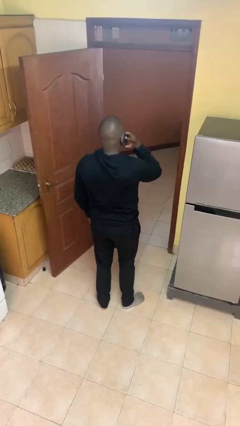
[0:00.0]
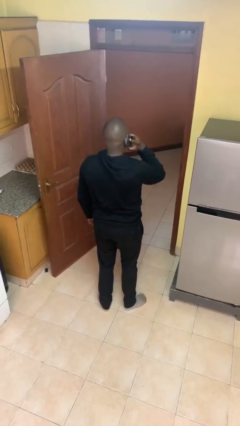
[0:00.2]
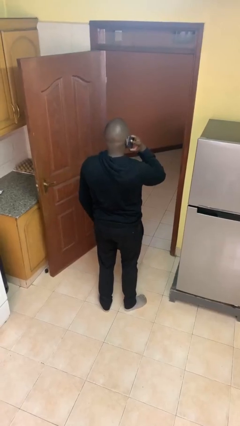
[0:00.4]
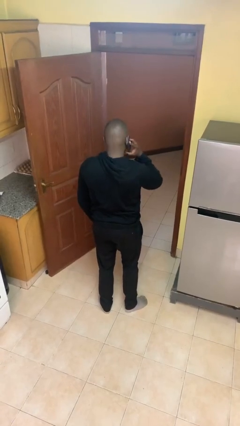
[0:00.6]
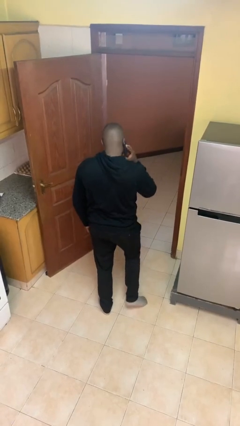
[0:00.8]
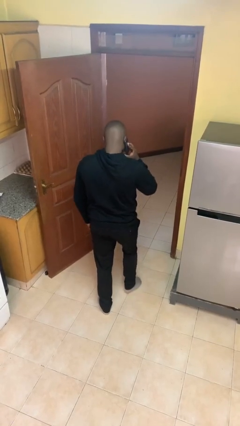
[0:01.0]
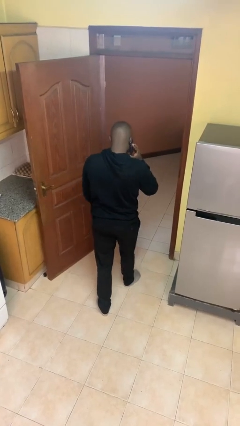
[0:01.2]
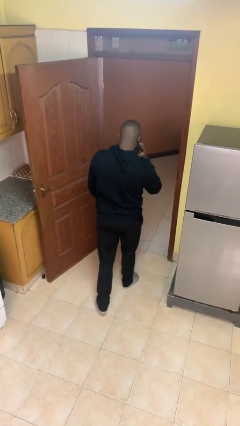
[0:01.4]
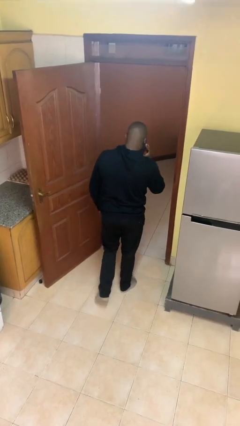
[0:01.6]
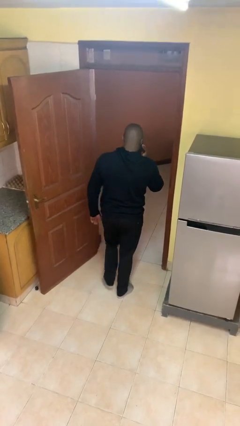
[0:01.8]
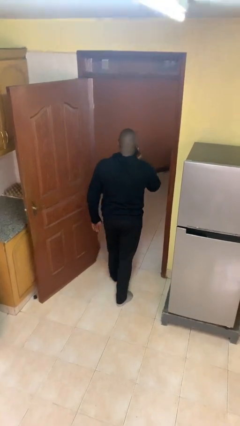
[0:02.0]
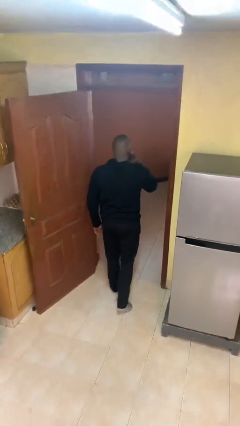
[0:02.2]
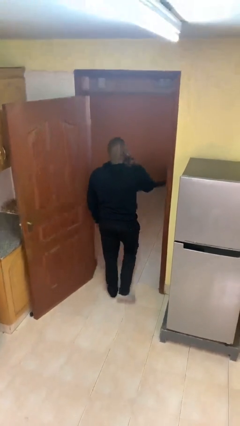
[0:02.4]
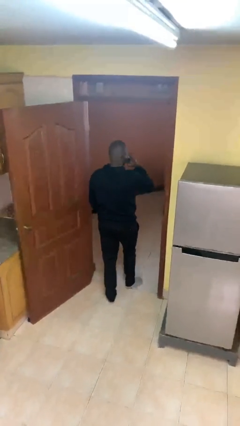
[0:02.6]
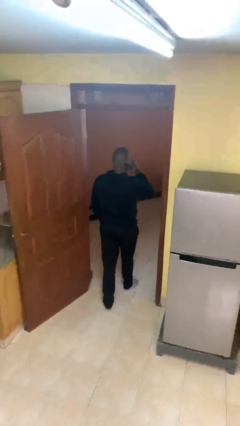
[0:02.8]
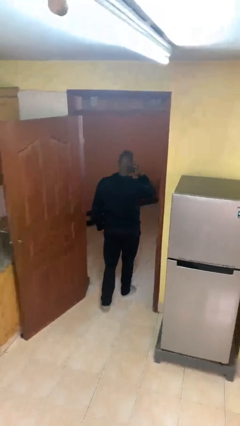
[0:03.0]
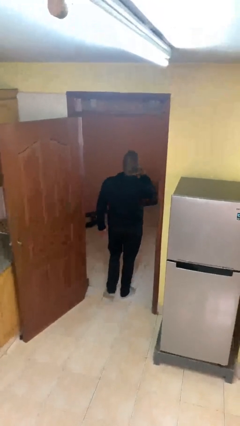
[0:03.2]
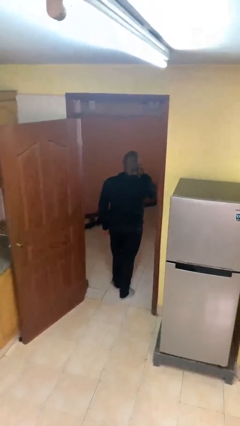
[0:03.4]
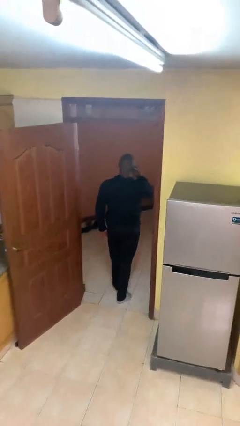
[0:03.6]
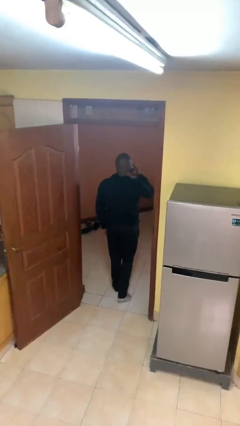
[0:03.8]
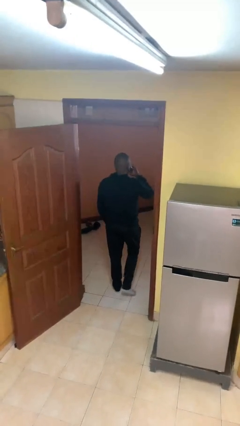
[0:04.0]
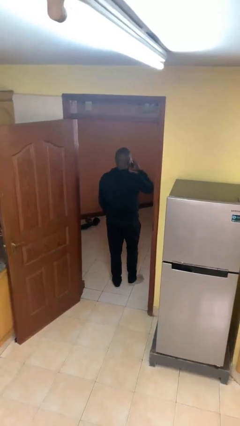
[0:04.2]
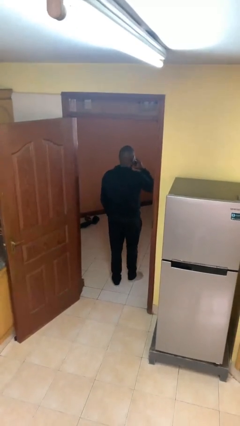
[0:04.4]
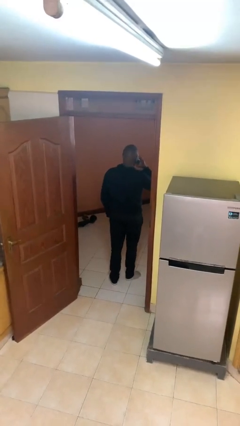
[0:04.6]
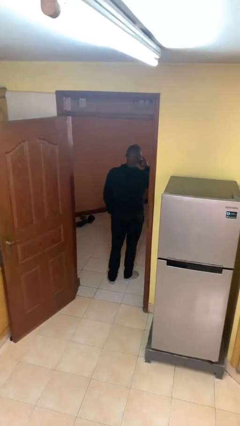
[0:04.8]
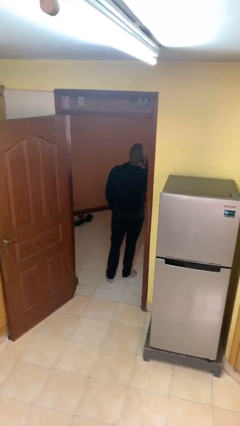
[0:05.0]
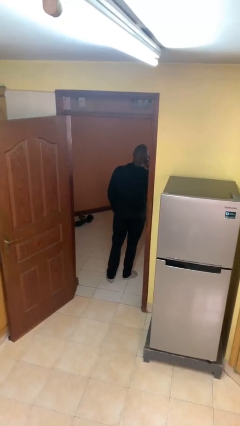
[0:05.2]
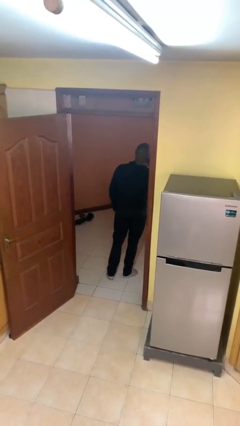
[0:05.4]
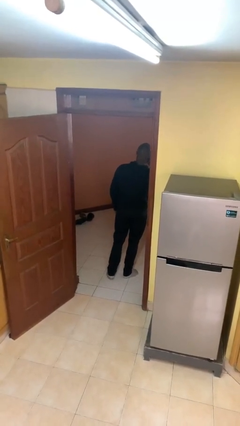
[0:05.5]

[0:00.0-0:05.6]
person exits scene through structure

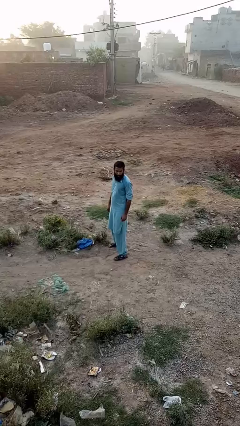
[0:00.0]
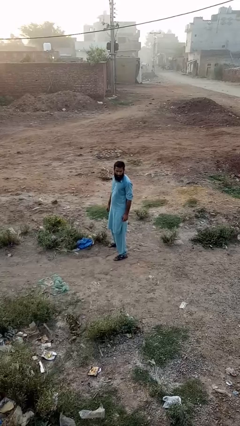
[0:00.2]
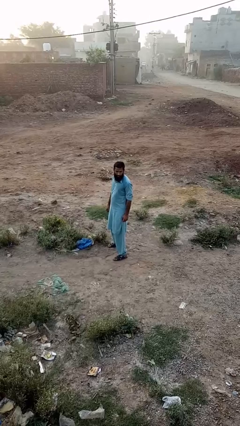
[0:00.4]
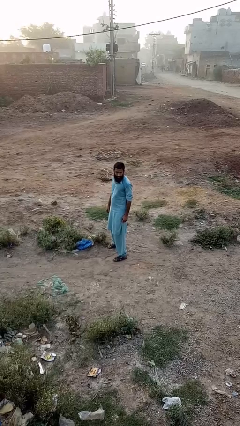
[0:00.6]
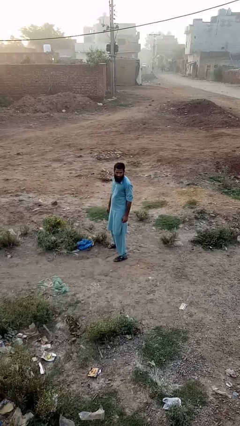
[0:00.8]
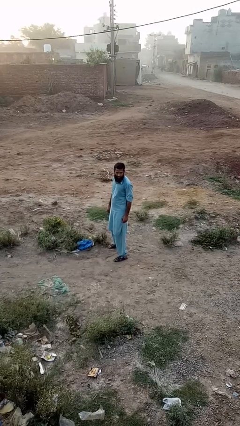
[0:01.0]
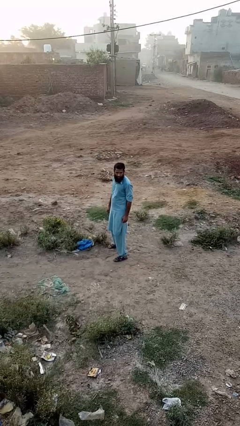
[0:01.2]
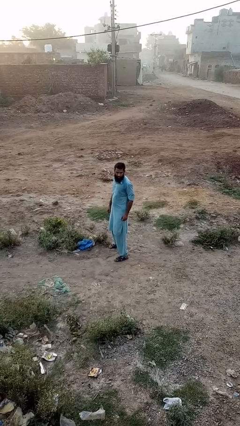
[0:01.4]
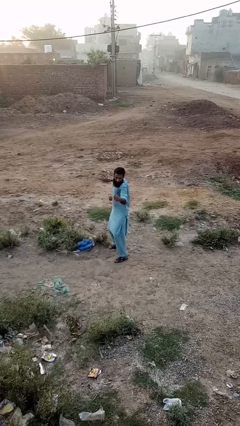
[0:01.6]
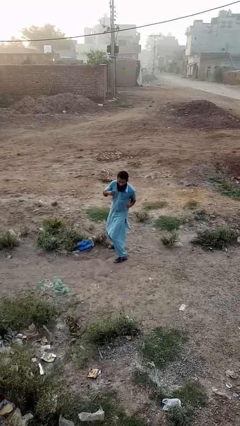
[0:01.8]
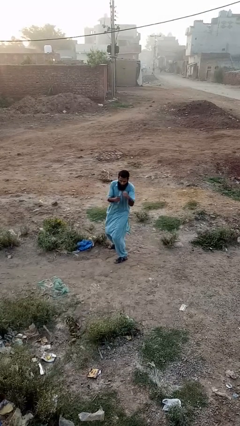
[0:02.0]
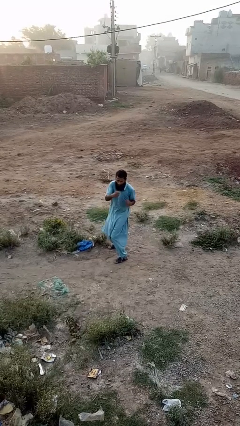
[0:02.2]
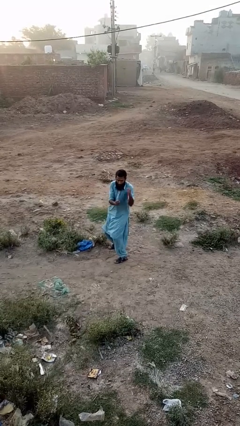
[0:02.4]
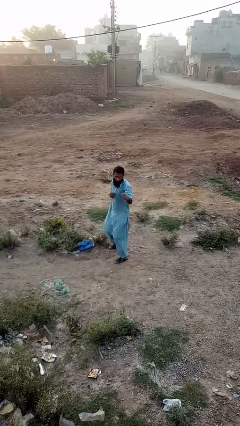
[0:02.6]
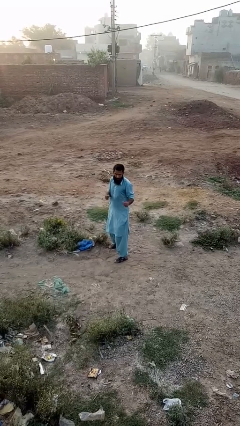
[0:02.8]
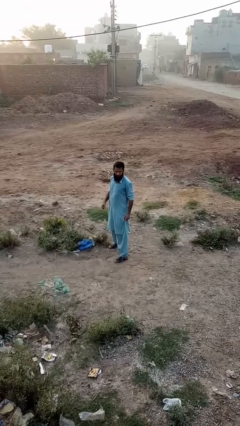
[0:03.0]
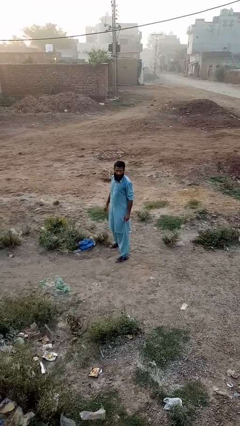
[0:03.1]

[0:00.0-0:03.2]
person punches

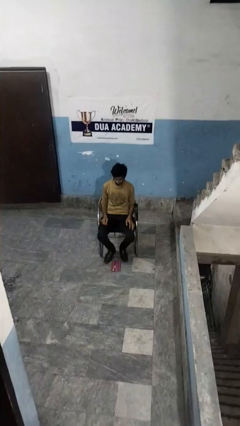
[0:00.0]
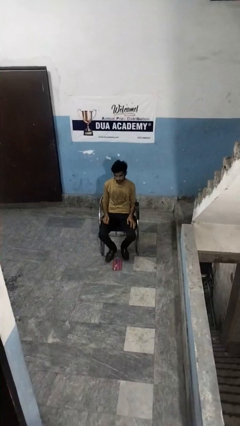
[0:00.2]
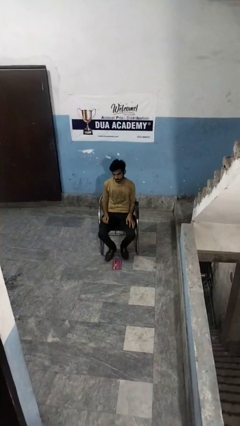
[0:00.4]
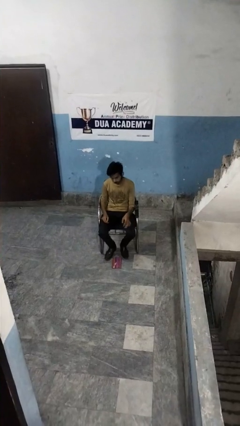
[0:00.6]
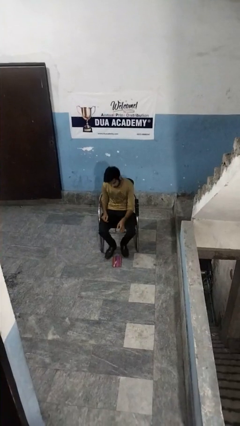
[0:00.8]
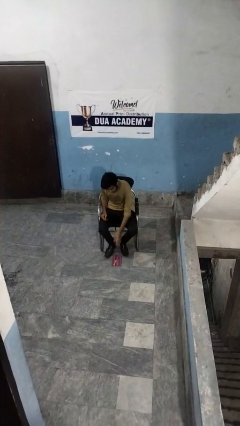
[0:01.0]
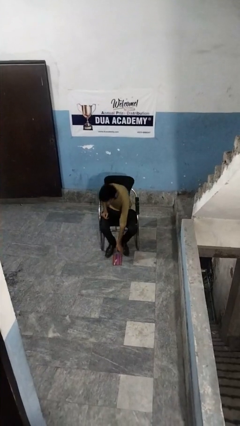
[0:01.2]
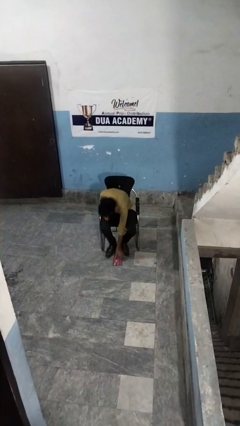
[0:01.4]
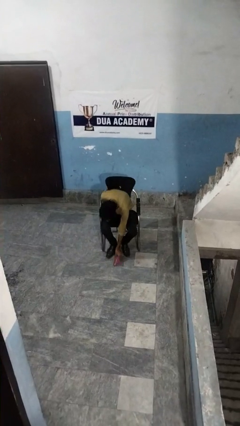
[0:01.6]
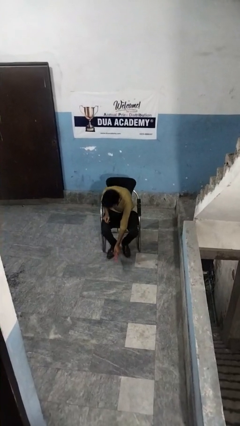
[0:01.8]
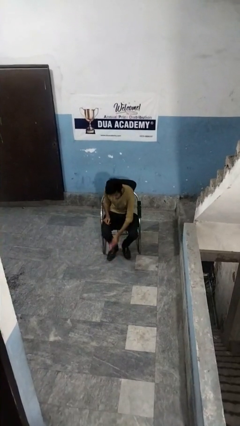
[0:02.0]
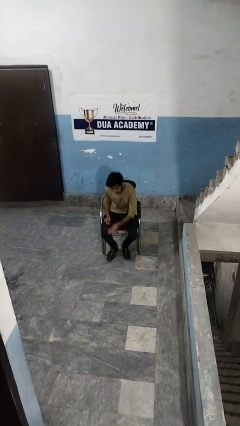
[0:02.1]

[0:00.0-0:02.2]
person picks up object from floor

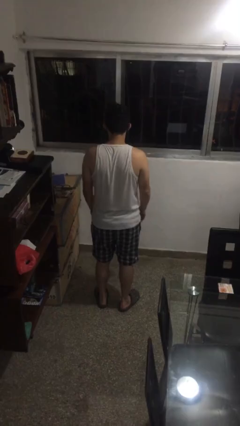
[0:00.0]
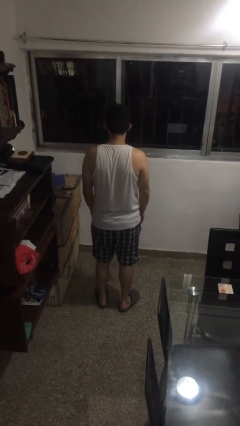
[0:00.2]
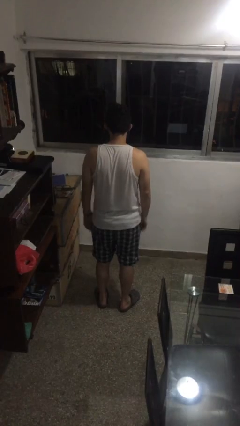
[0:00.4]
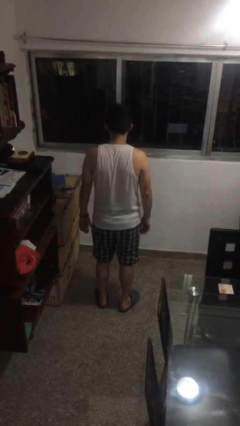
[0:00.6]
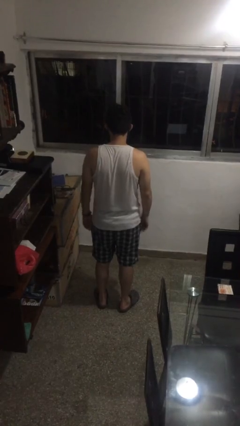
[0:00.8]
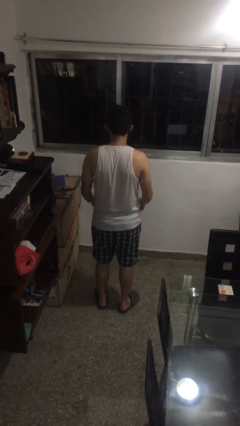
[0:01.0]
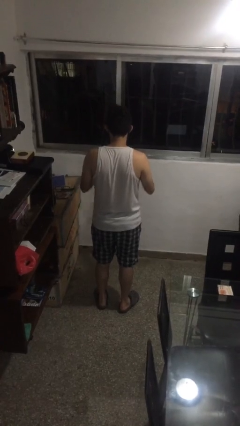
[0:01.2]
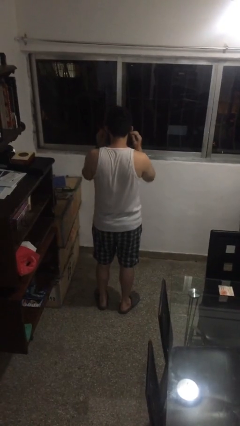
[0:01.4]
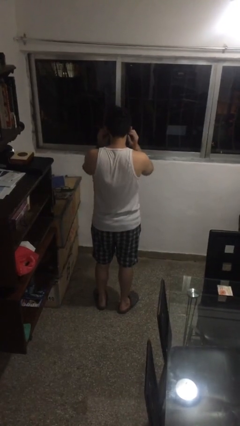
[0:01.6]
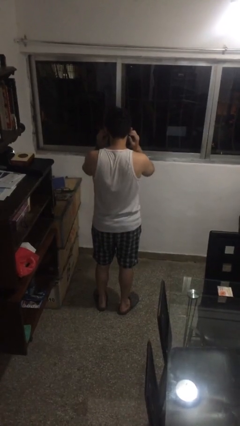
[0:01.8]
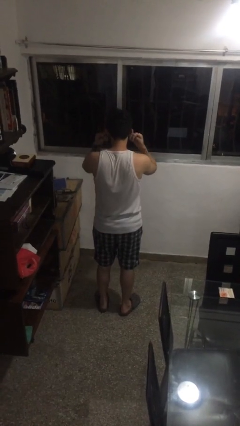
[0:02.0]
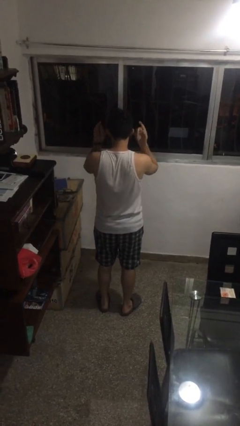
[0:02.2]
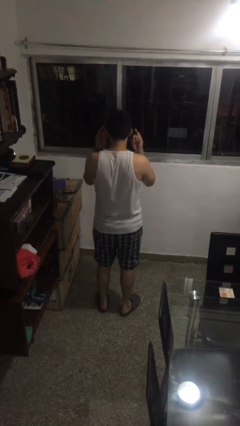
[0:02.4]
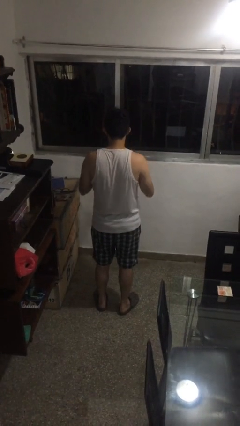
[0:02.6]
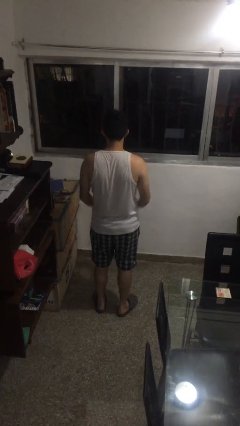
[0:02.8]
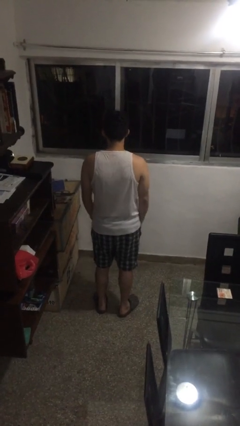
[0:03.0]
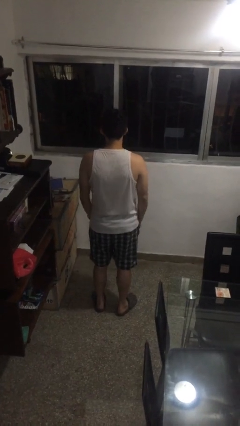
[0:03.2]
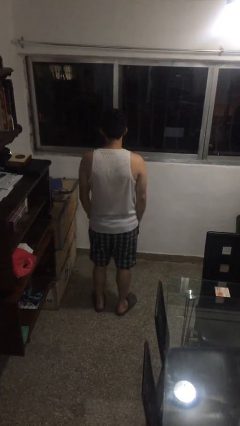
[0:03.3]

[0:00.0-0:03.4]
person takes off facemask

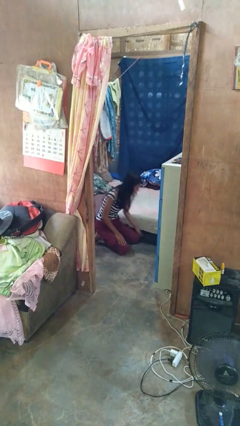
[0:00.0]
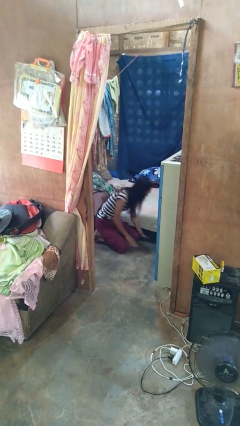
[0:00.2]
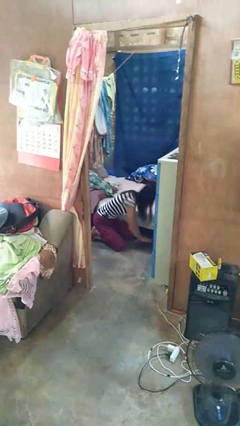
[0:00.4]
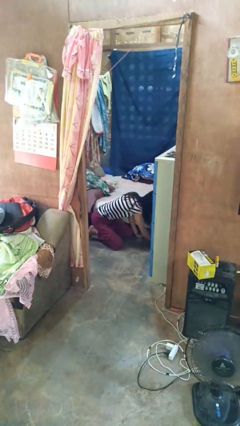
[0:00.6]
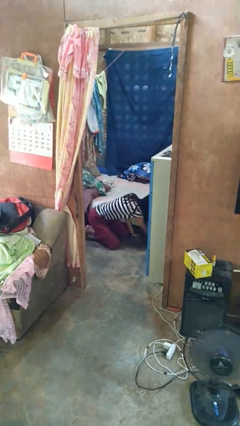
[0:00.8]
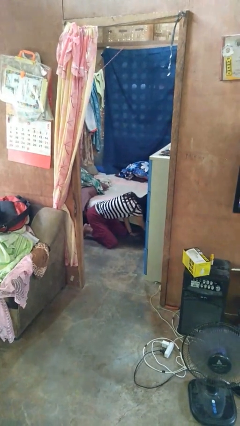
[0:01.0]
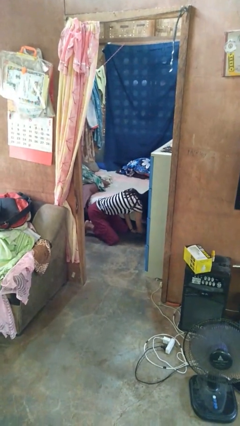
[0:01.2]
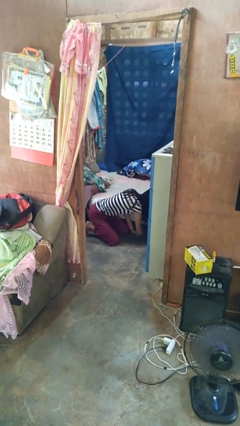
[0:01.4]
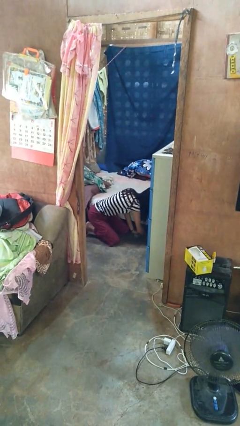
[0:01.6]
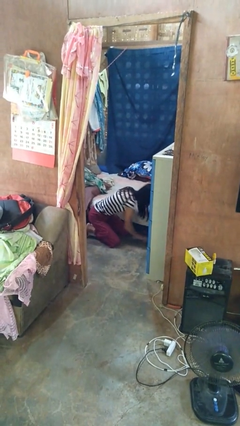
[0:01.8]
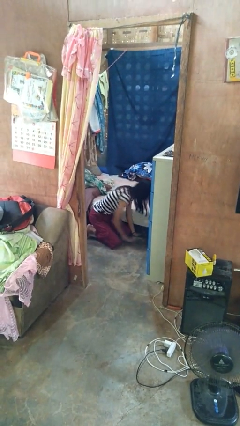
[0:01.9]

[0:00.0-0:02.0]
person searches under bed

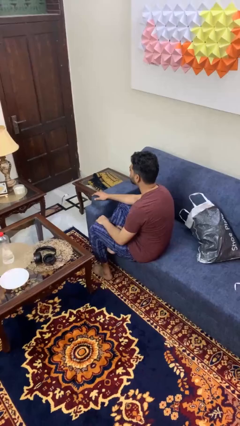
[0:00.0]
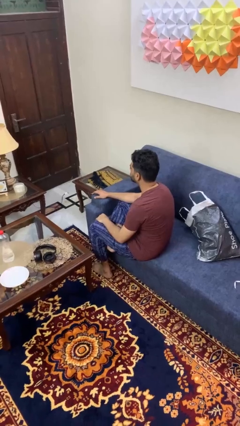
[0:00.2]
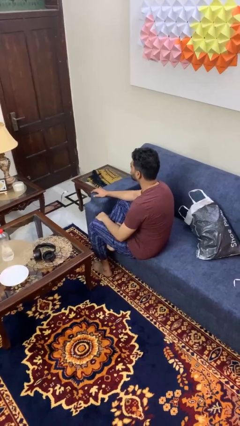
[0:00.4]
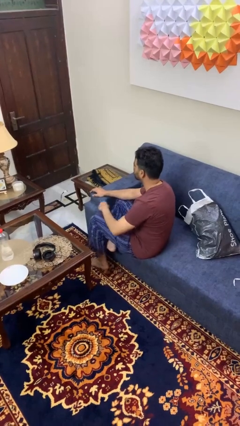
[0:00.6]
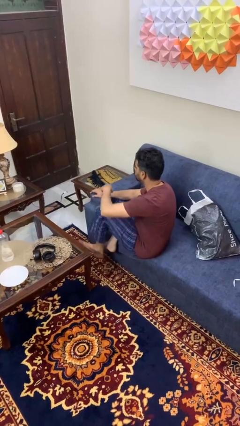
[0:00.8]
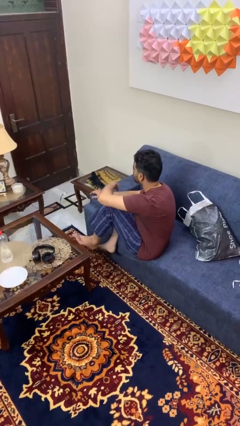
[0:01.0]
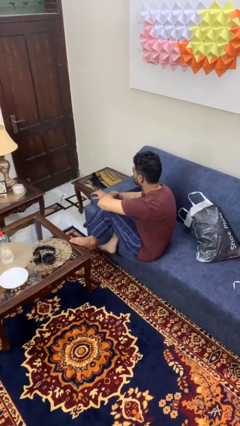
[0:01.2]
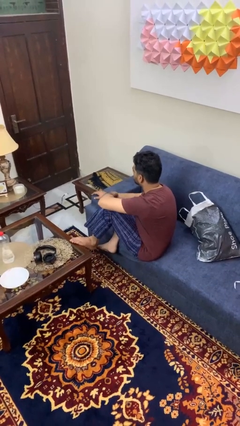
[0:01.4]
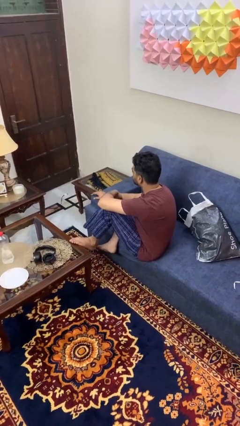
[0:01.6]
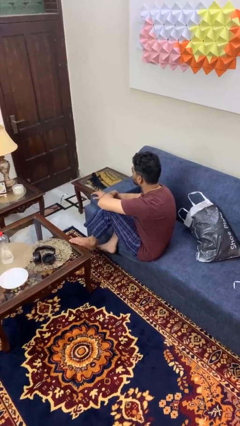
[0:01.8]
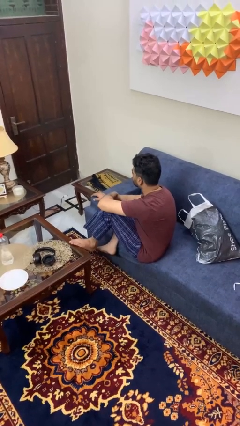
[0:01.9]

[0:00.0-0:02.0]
person puts feet up
